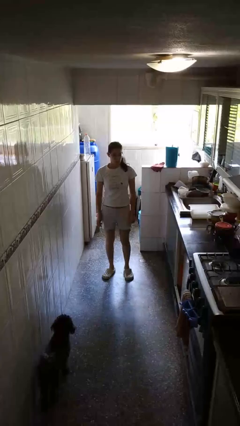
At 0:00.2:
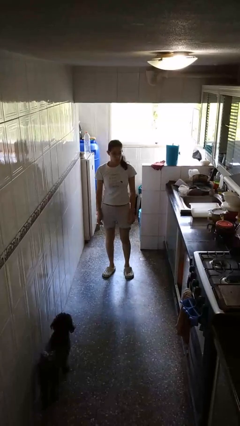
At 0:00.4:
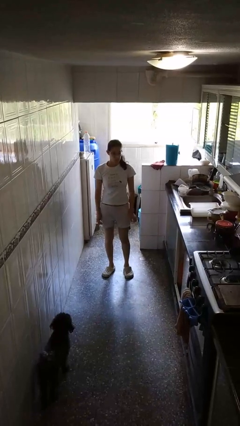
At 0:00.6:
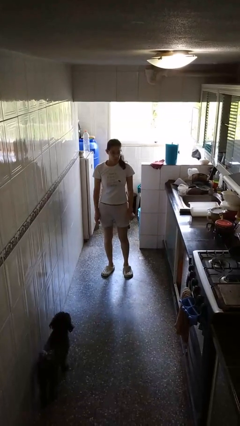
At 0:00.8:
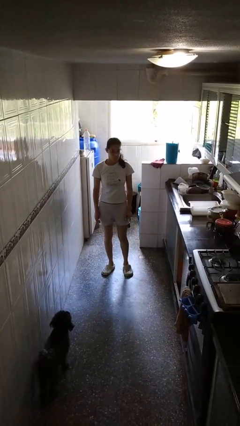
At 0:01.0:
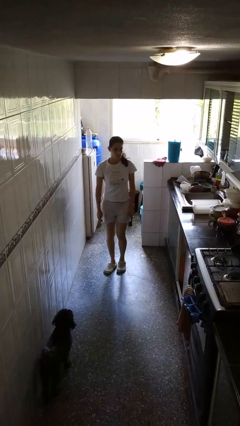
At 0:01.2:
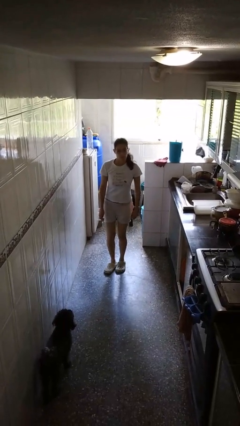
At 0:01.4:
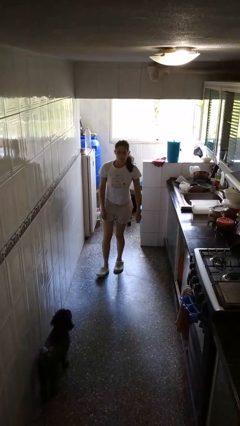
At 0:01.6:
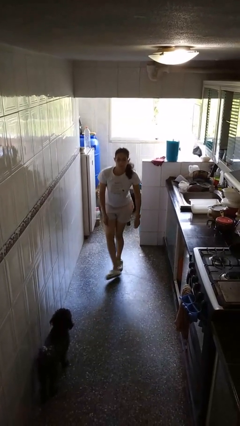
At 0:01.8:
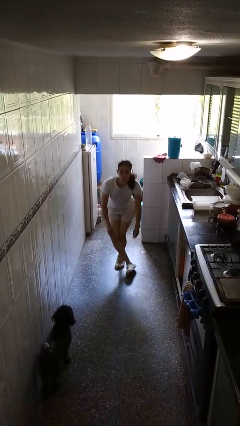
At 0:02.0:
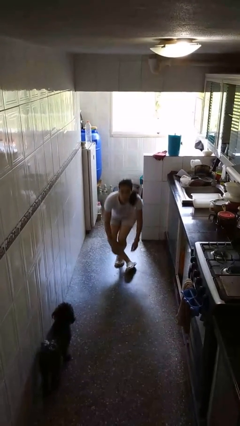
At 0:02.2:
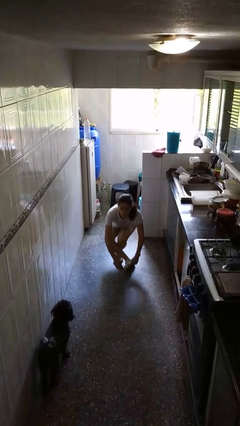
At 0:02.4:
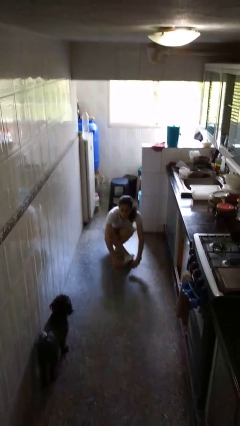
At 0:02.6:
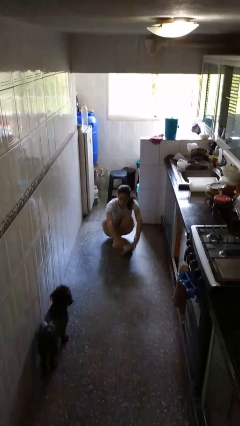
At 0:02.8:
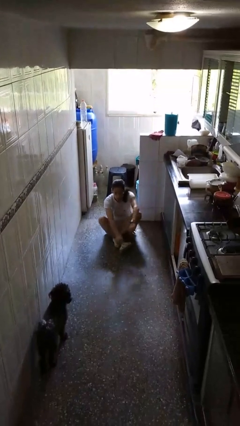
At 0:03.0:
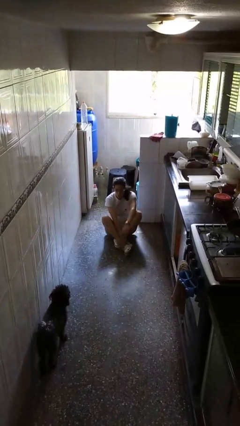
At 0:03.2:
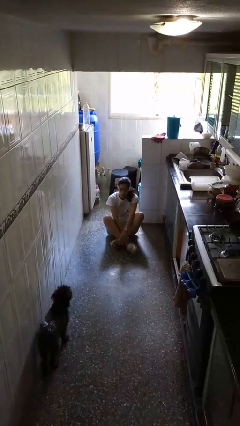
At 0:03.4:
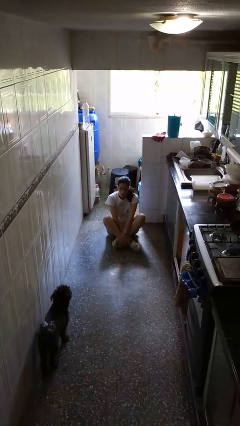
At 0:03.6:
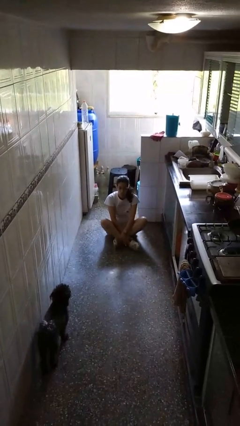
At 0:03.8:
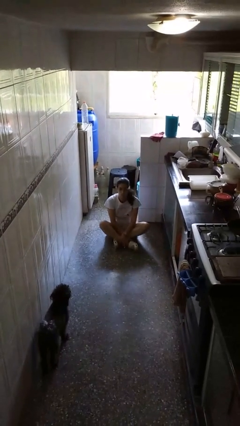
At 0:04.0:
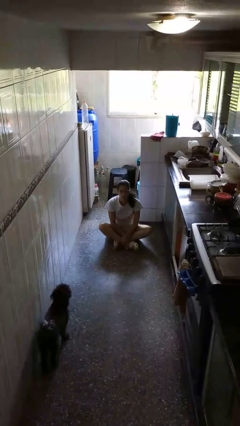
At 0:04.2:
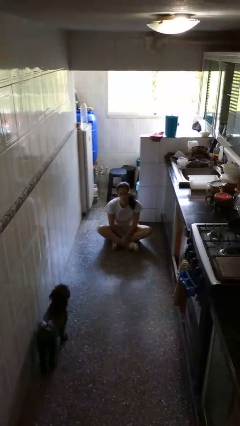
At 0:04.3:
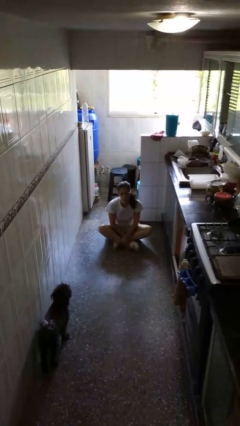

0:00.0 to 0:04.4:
person sits crisscross

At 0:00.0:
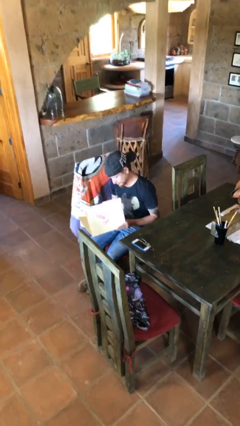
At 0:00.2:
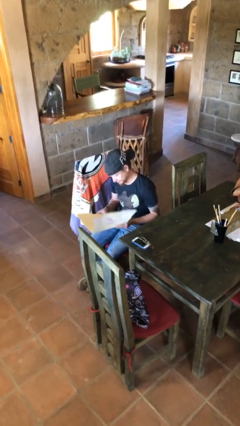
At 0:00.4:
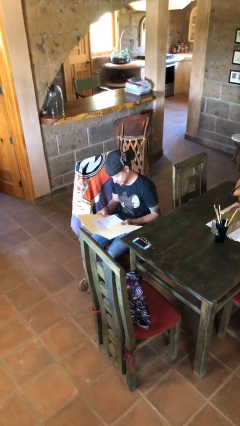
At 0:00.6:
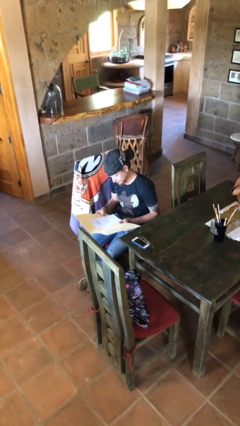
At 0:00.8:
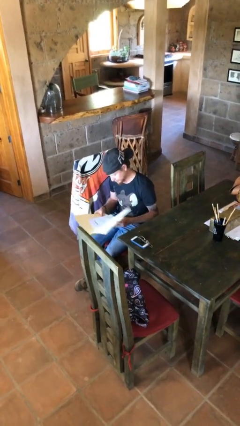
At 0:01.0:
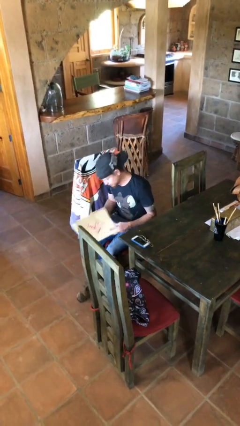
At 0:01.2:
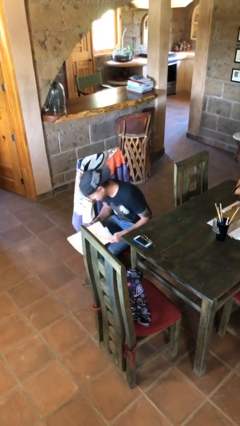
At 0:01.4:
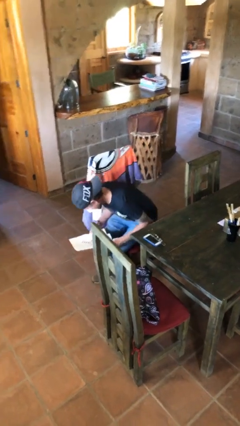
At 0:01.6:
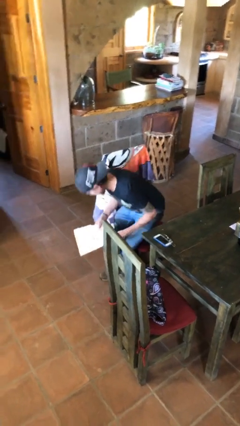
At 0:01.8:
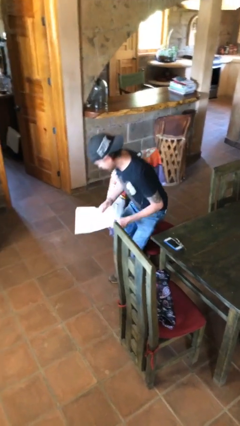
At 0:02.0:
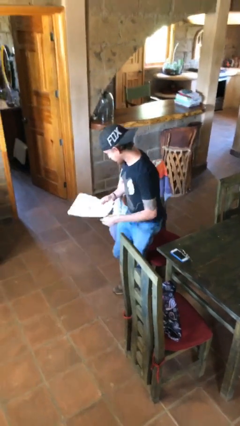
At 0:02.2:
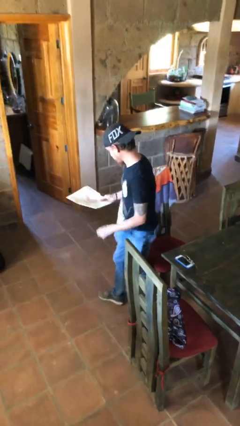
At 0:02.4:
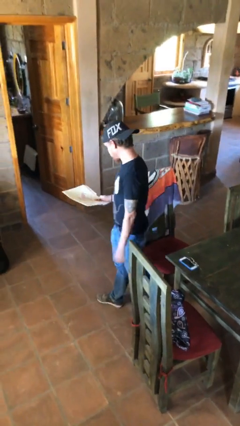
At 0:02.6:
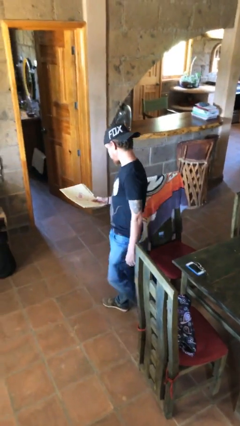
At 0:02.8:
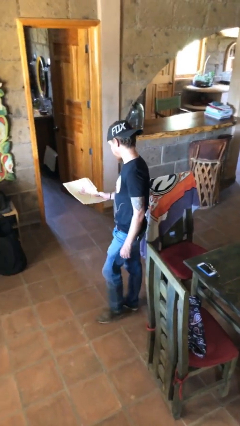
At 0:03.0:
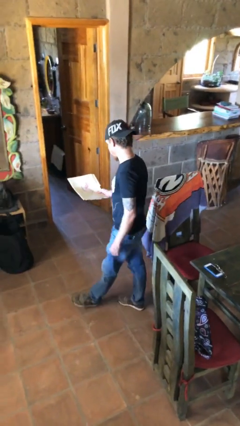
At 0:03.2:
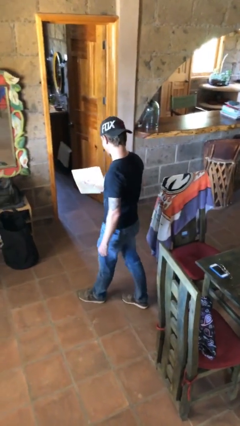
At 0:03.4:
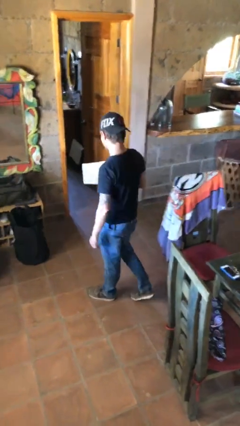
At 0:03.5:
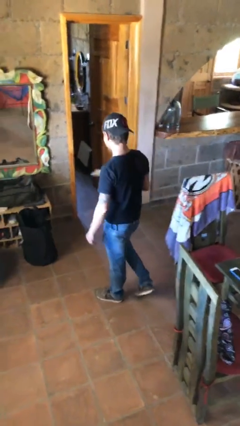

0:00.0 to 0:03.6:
person stands up

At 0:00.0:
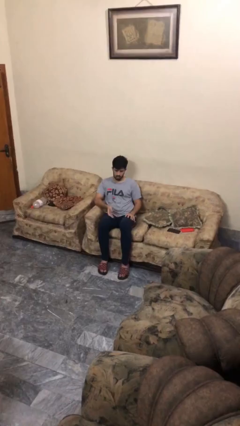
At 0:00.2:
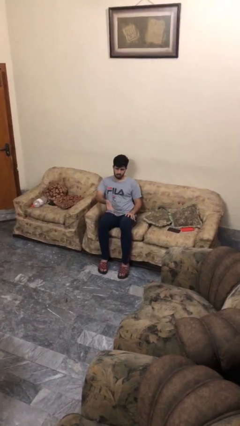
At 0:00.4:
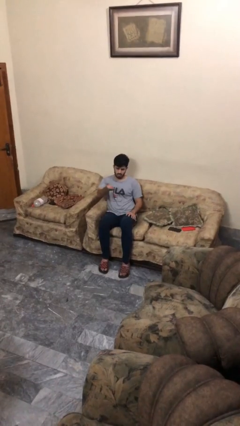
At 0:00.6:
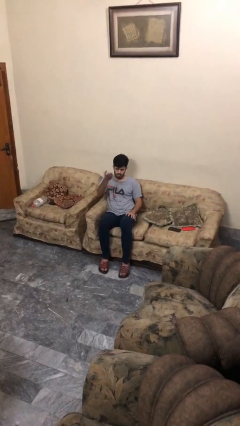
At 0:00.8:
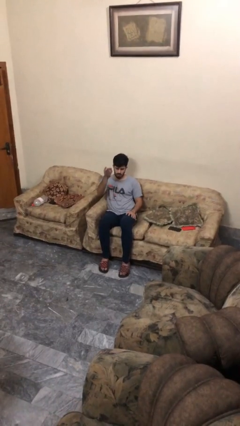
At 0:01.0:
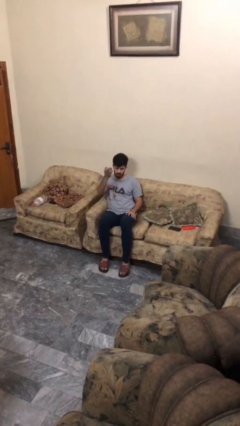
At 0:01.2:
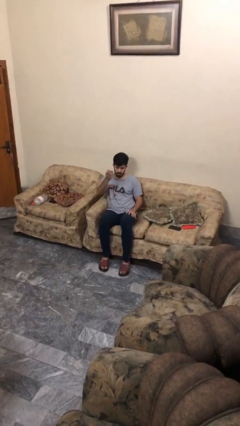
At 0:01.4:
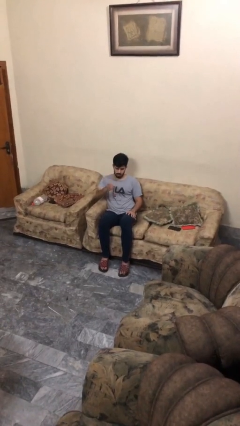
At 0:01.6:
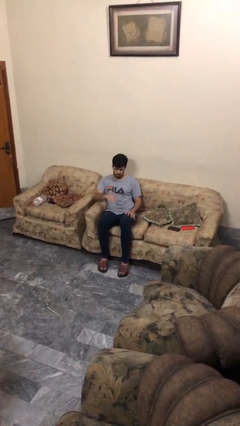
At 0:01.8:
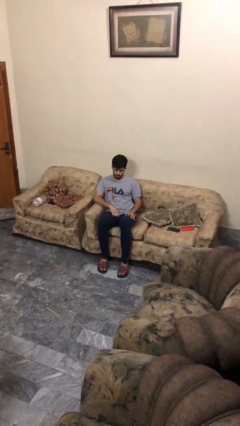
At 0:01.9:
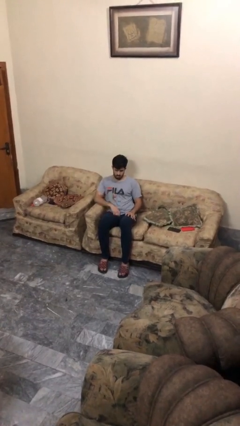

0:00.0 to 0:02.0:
person gestures swipe up

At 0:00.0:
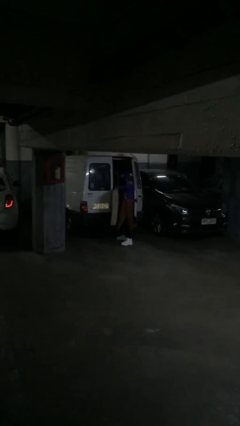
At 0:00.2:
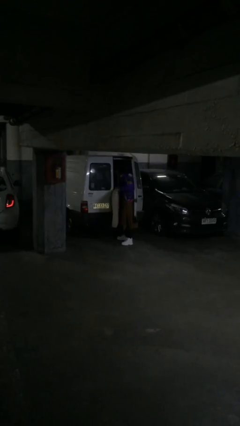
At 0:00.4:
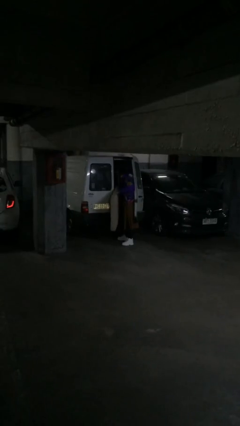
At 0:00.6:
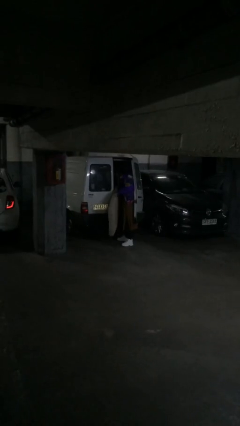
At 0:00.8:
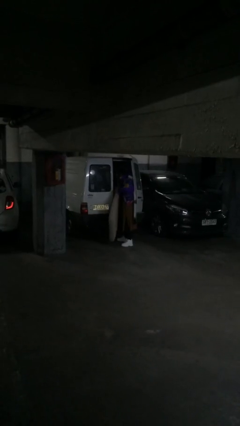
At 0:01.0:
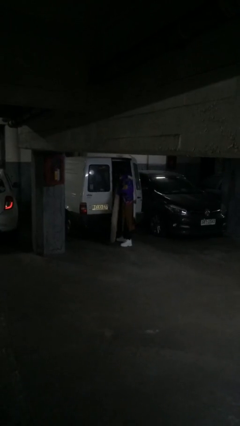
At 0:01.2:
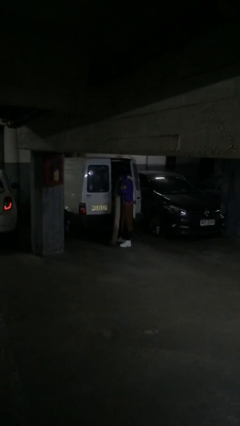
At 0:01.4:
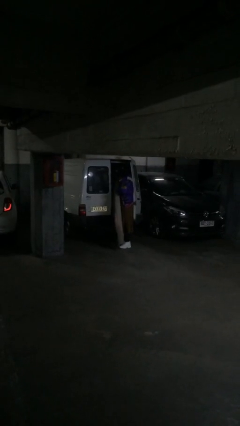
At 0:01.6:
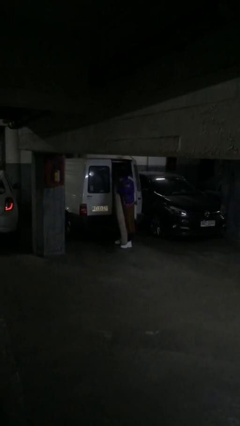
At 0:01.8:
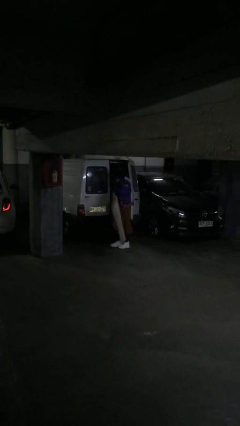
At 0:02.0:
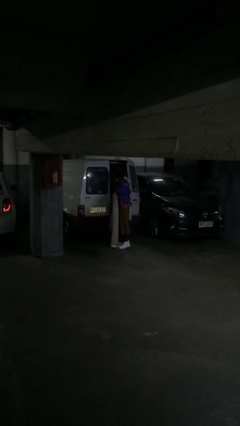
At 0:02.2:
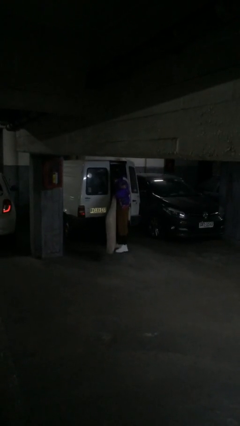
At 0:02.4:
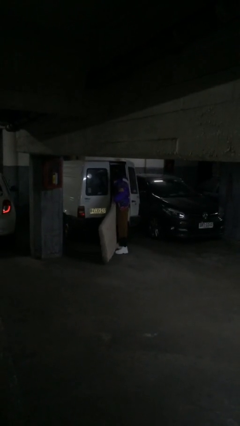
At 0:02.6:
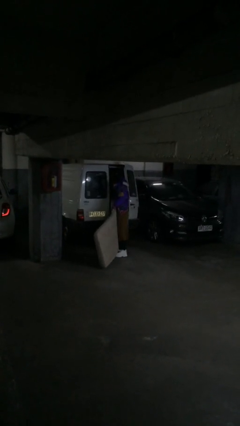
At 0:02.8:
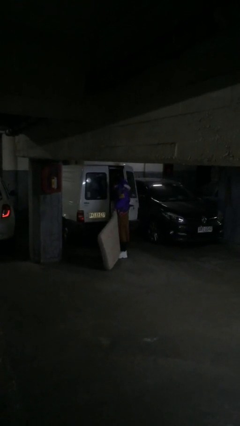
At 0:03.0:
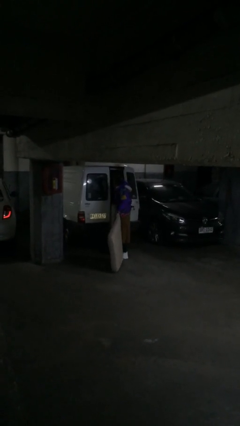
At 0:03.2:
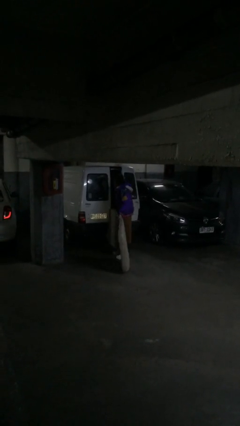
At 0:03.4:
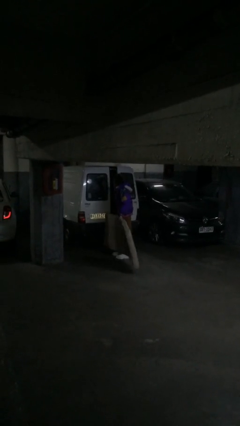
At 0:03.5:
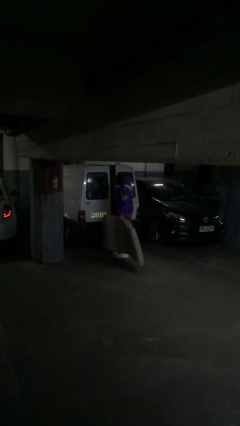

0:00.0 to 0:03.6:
person unloads car

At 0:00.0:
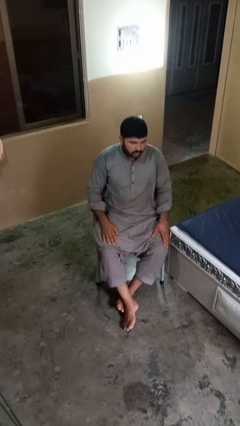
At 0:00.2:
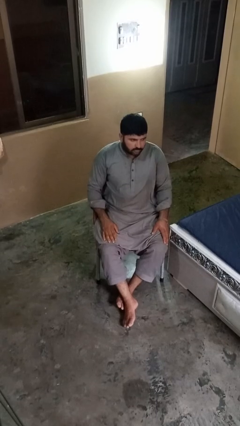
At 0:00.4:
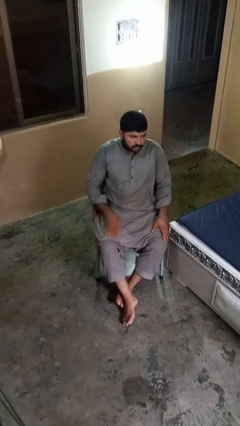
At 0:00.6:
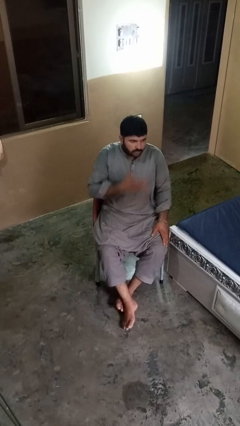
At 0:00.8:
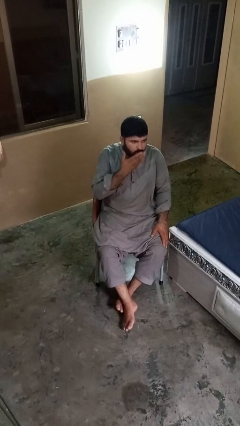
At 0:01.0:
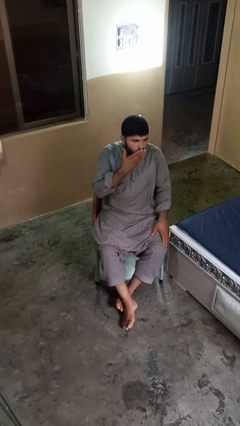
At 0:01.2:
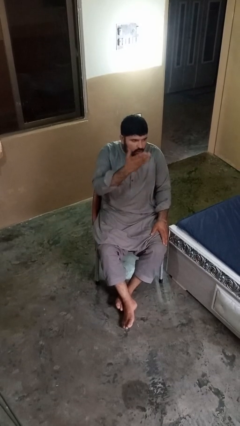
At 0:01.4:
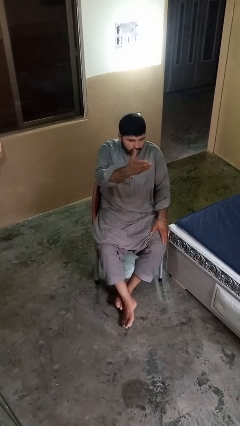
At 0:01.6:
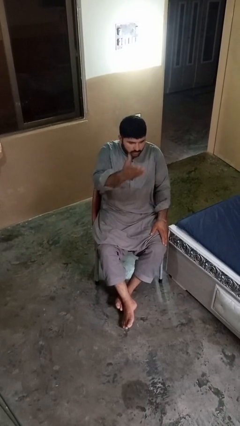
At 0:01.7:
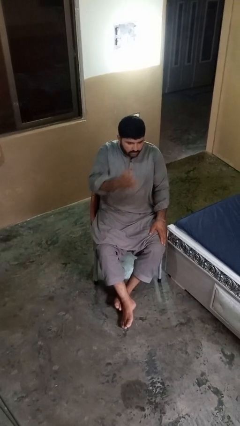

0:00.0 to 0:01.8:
person gestures blow kiss

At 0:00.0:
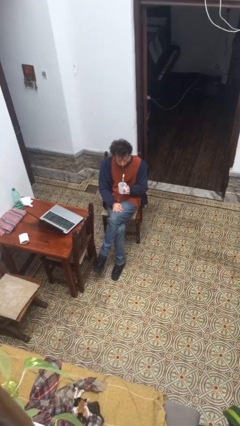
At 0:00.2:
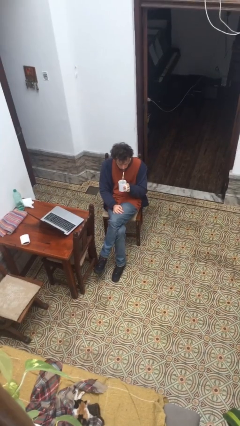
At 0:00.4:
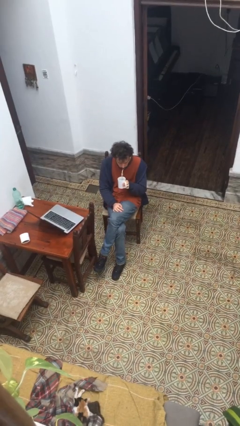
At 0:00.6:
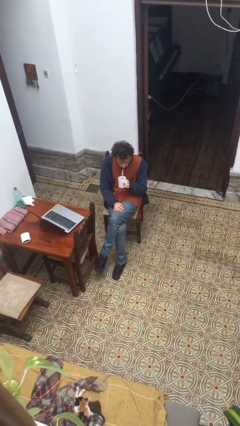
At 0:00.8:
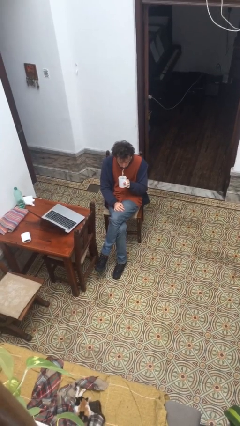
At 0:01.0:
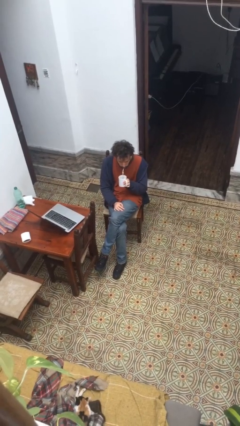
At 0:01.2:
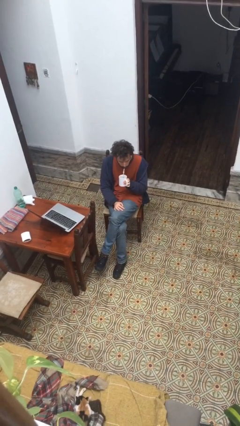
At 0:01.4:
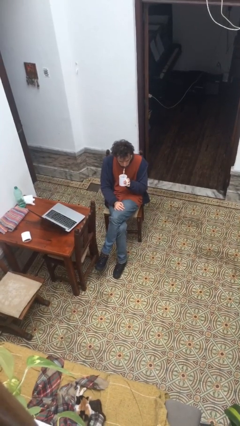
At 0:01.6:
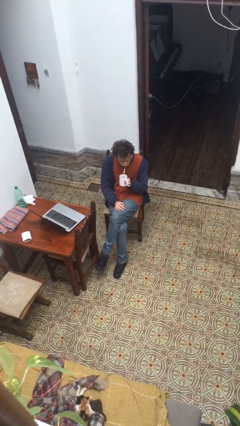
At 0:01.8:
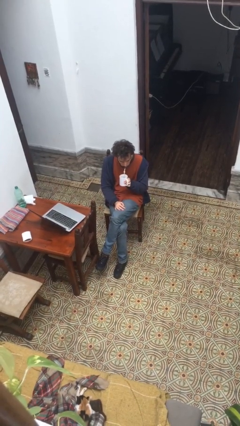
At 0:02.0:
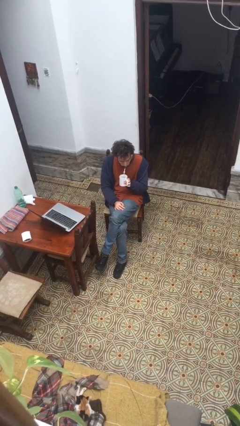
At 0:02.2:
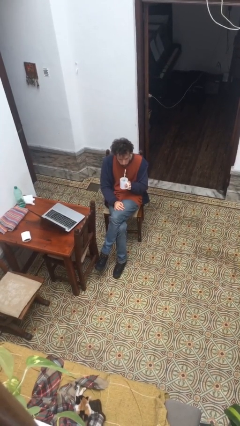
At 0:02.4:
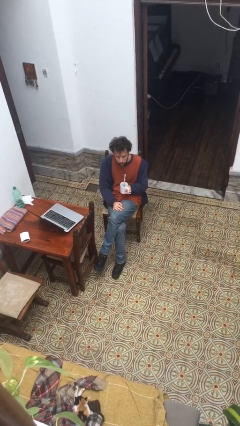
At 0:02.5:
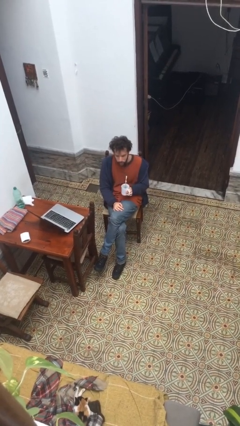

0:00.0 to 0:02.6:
person drinks from straw
